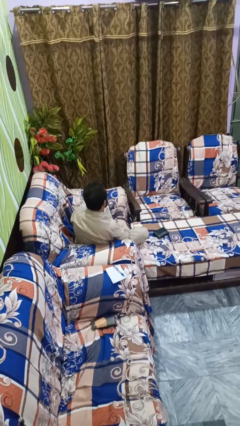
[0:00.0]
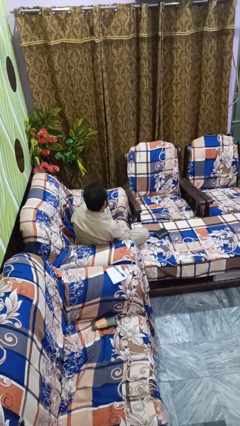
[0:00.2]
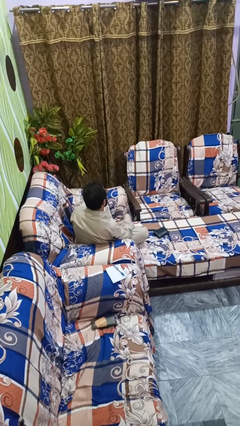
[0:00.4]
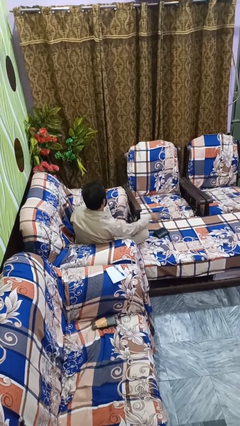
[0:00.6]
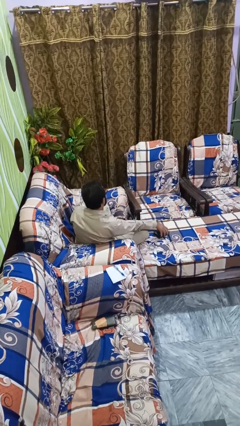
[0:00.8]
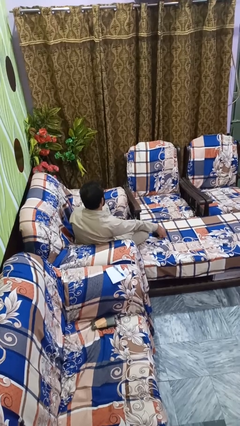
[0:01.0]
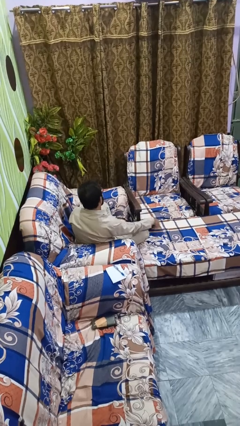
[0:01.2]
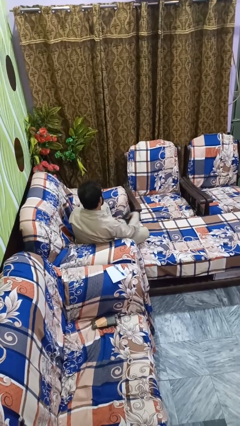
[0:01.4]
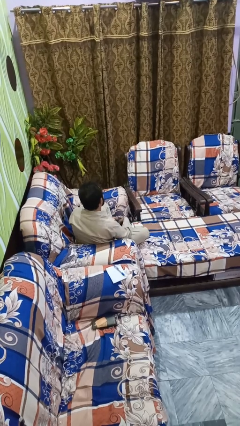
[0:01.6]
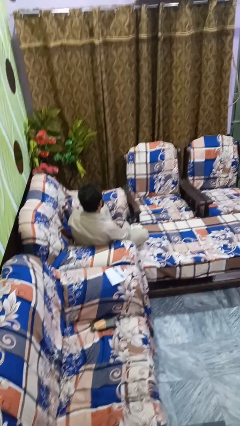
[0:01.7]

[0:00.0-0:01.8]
person picks up object from floor

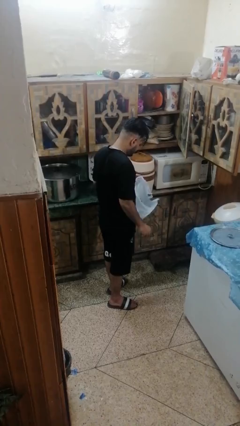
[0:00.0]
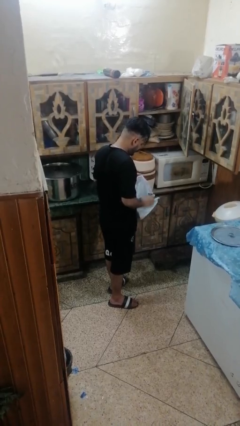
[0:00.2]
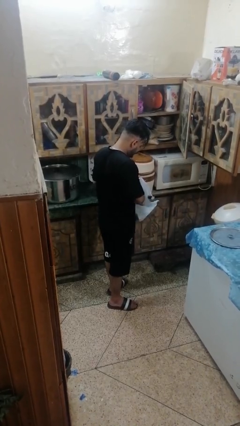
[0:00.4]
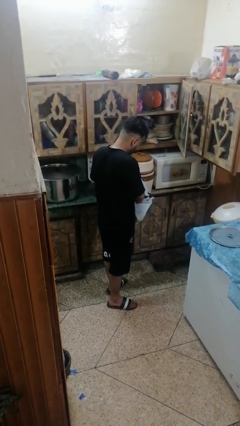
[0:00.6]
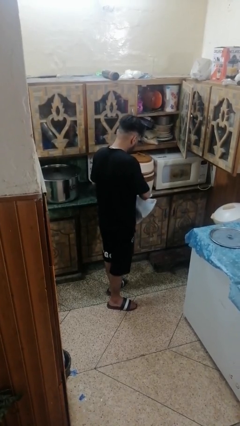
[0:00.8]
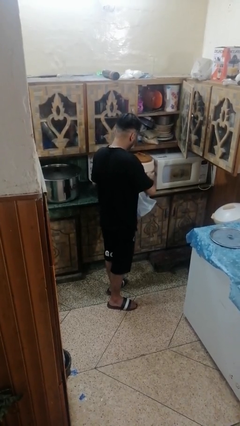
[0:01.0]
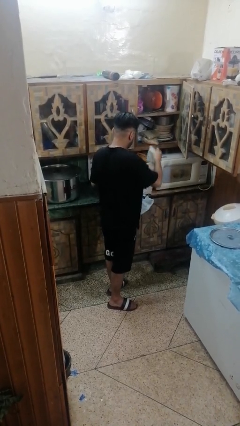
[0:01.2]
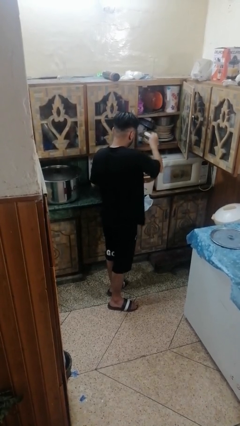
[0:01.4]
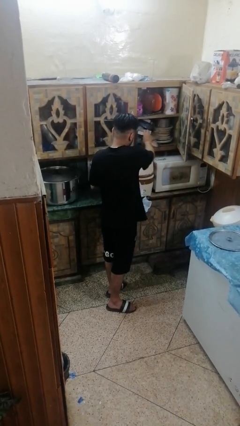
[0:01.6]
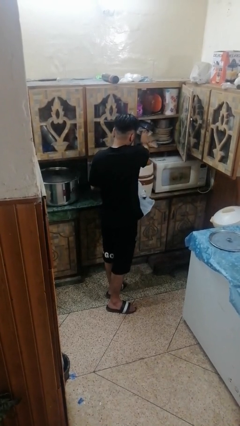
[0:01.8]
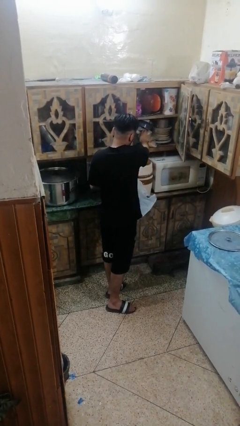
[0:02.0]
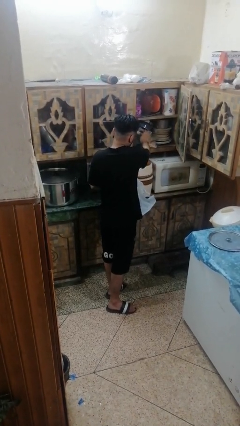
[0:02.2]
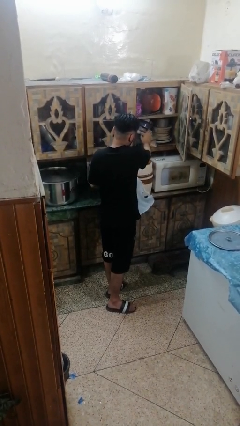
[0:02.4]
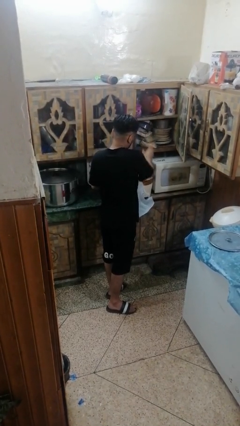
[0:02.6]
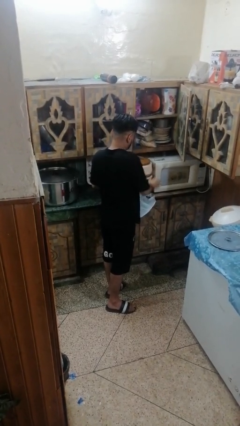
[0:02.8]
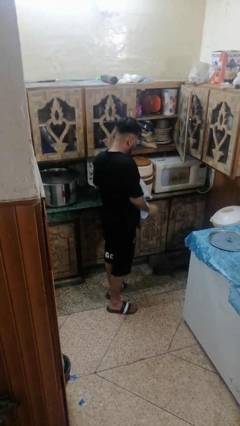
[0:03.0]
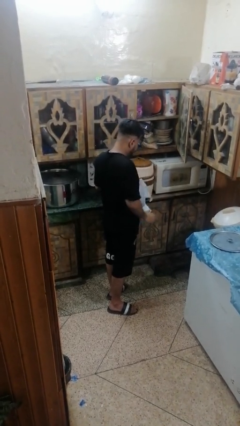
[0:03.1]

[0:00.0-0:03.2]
person loads groceries into cabinet

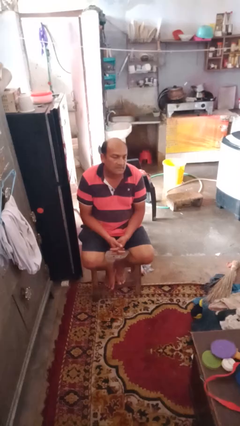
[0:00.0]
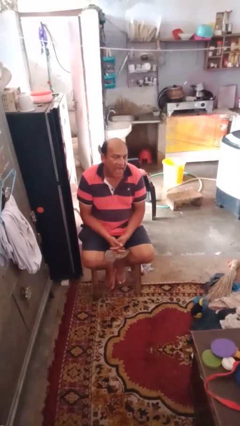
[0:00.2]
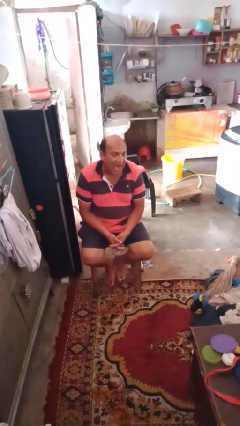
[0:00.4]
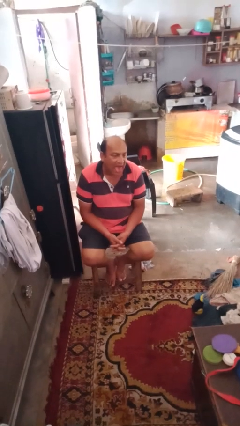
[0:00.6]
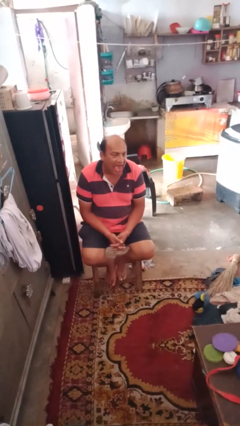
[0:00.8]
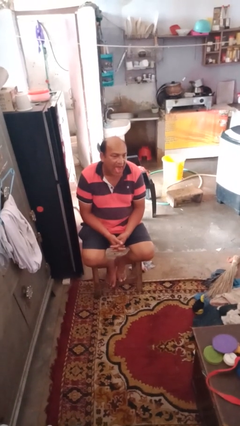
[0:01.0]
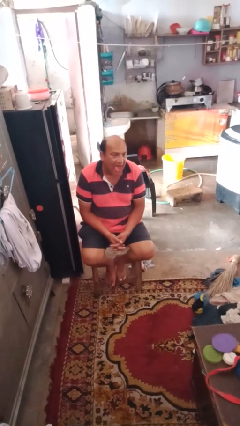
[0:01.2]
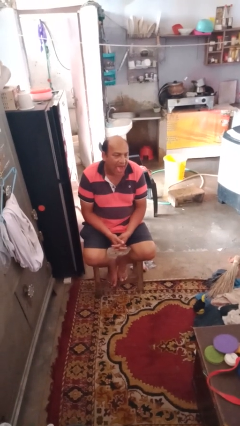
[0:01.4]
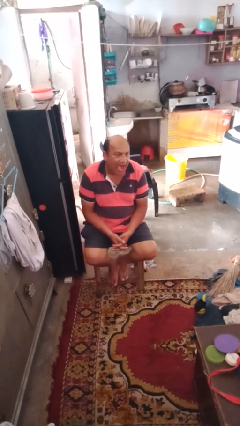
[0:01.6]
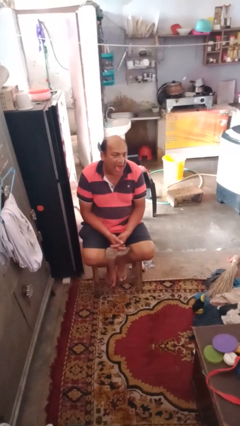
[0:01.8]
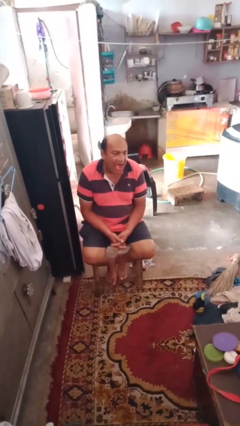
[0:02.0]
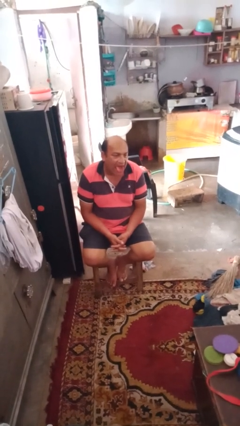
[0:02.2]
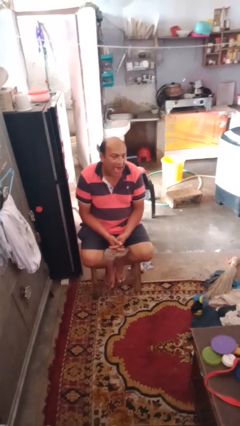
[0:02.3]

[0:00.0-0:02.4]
person sticks out tongue

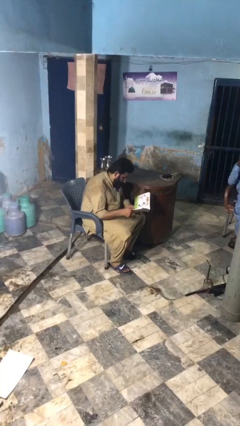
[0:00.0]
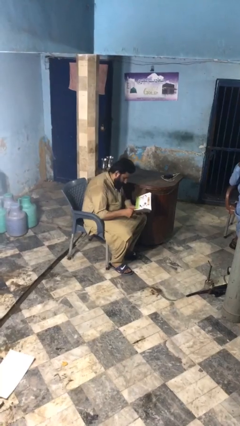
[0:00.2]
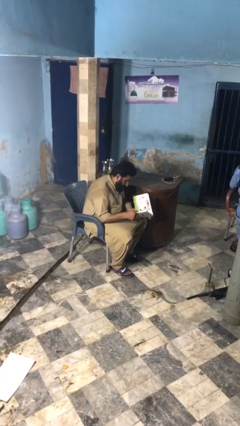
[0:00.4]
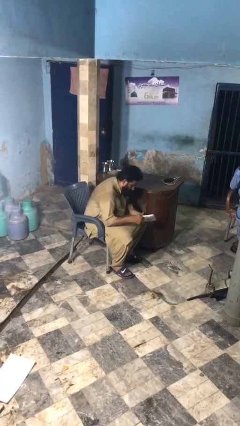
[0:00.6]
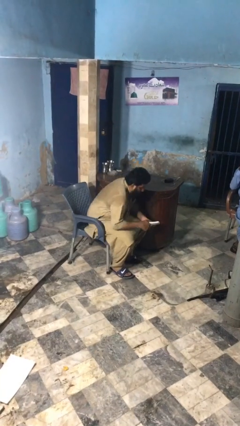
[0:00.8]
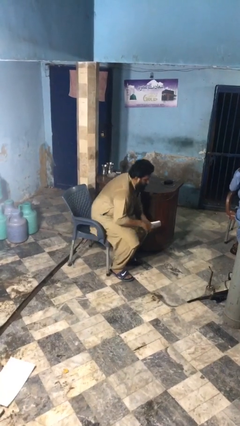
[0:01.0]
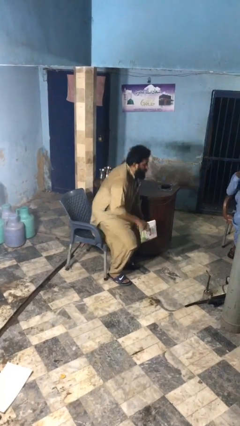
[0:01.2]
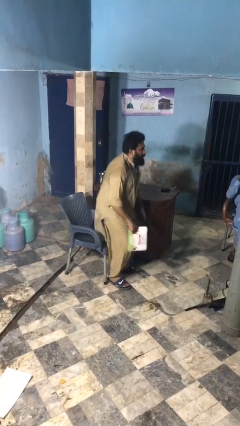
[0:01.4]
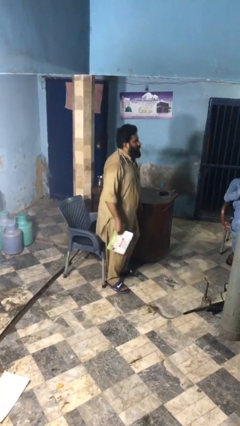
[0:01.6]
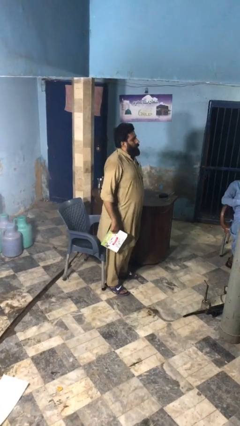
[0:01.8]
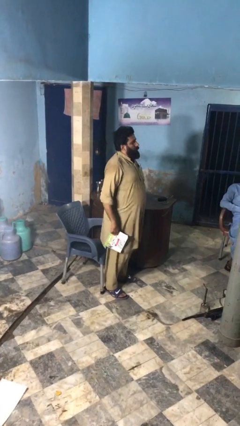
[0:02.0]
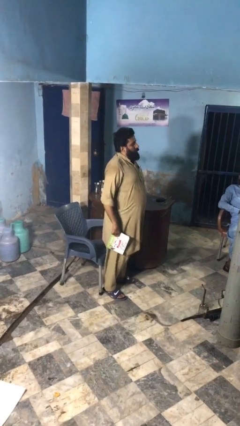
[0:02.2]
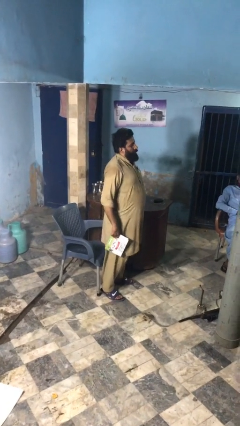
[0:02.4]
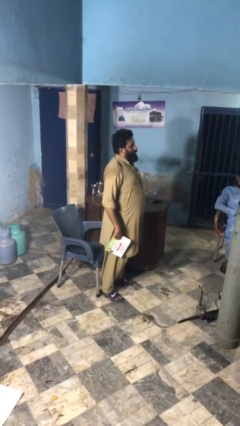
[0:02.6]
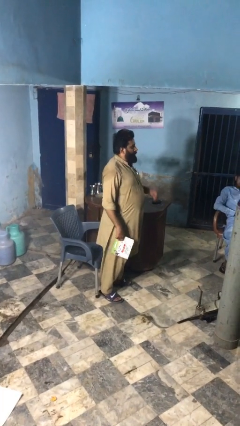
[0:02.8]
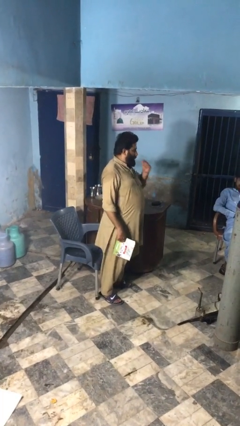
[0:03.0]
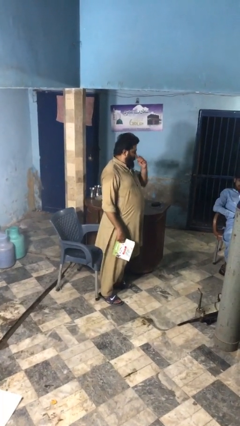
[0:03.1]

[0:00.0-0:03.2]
person stands up

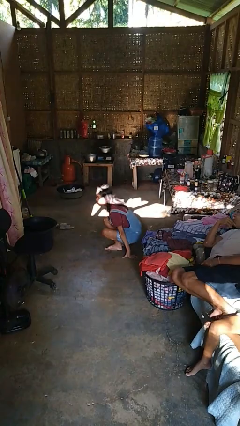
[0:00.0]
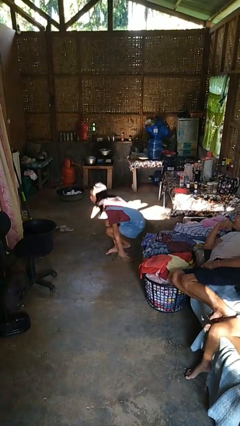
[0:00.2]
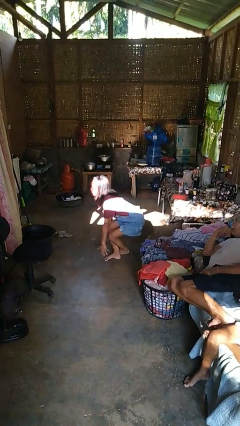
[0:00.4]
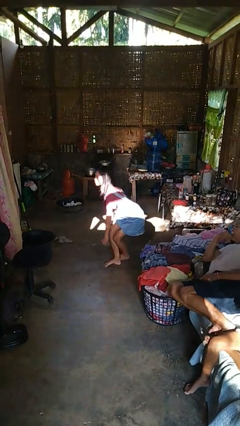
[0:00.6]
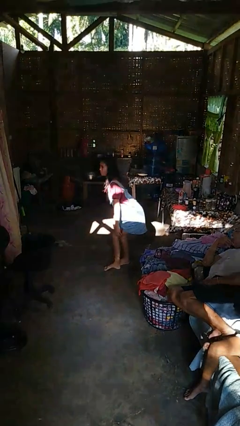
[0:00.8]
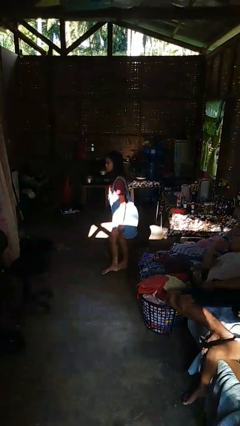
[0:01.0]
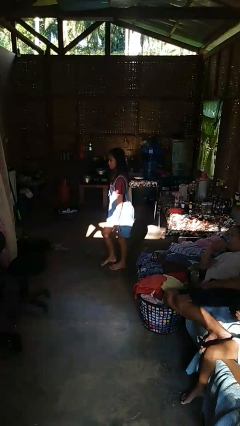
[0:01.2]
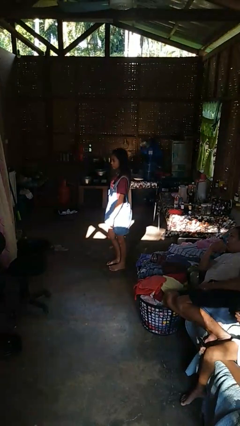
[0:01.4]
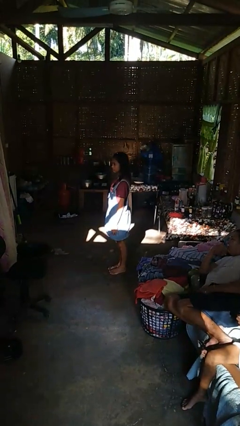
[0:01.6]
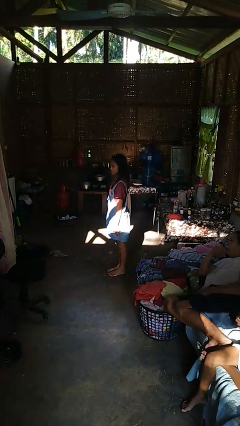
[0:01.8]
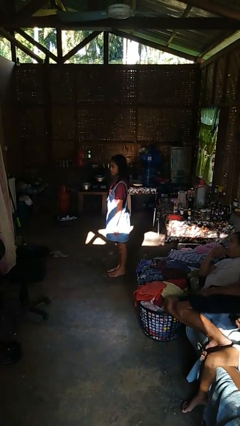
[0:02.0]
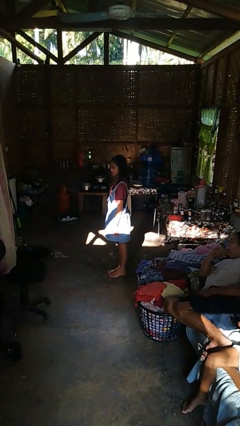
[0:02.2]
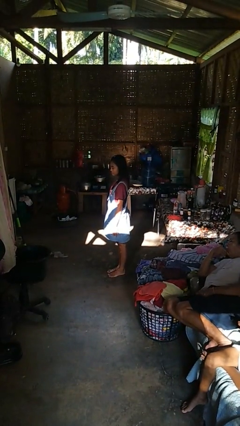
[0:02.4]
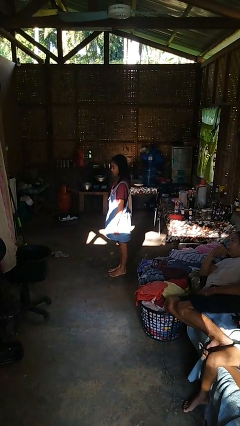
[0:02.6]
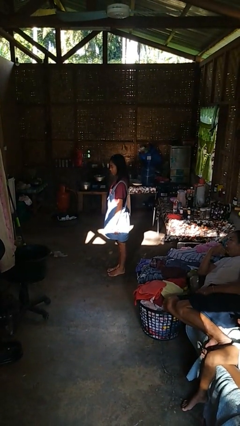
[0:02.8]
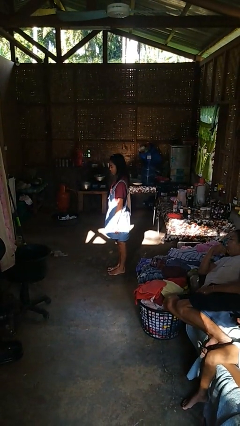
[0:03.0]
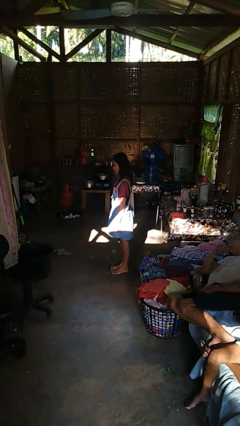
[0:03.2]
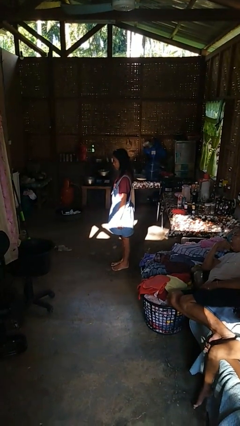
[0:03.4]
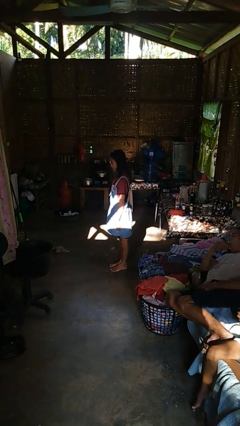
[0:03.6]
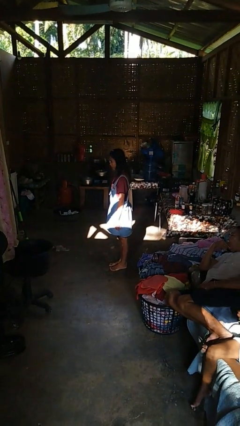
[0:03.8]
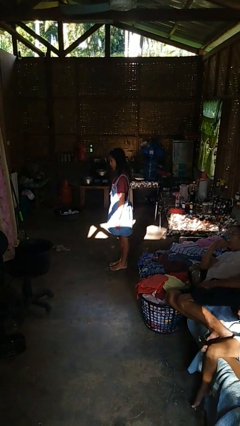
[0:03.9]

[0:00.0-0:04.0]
person stands up from floor

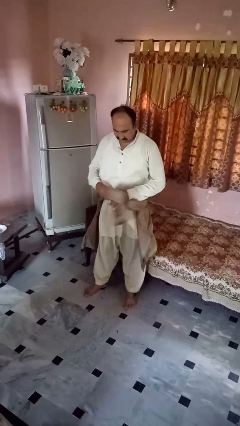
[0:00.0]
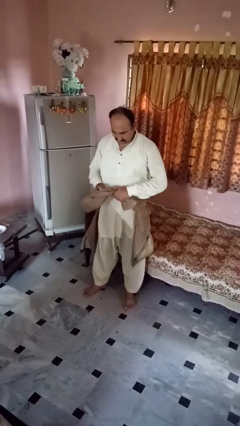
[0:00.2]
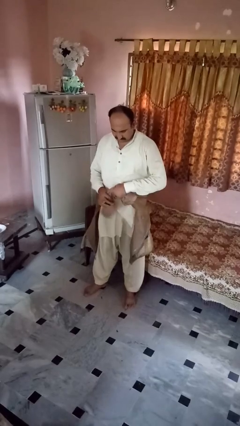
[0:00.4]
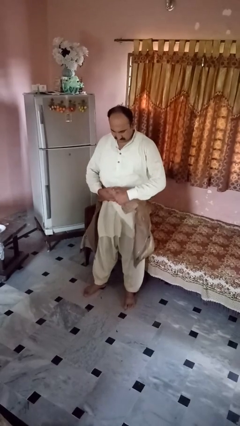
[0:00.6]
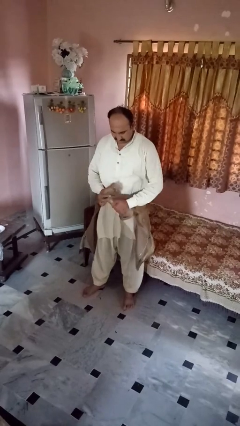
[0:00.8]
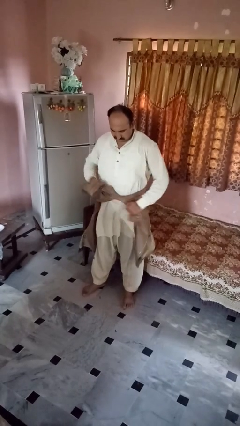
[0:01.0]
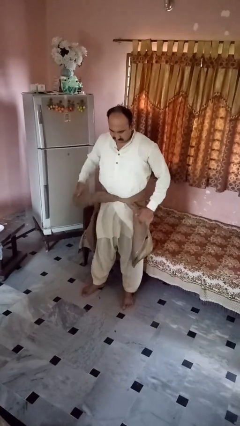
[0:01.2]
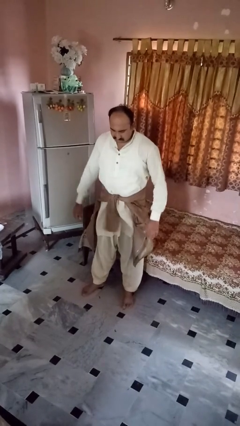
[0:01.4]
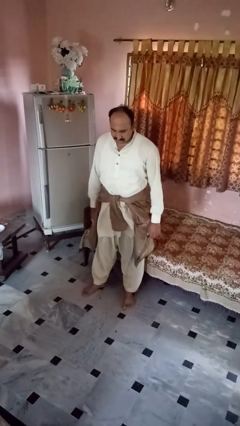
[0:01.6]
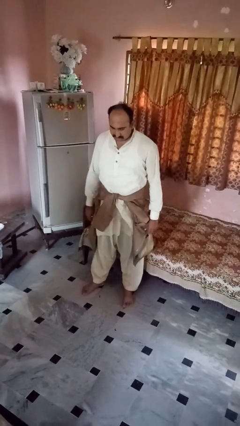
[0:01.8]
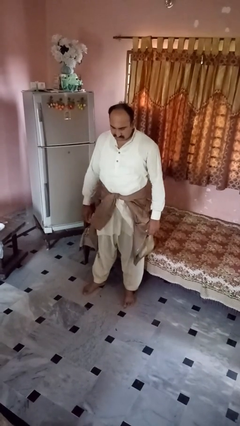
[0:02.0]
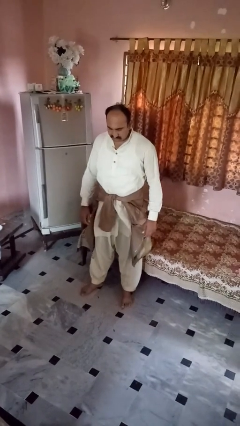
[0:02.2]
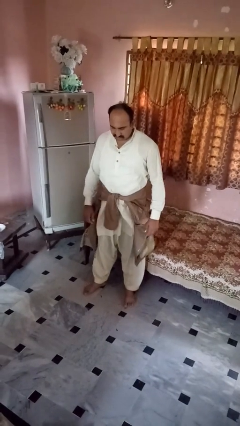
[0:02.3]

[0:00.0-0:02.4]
person ties jacket around waist
